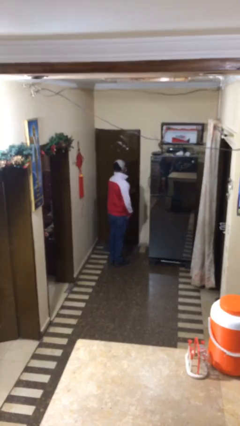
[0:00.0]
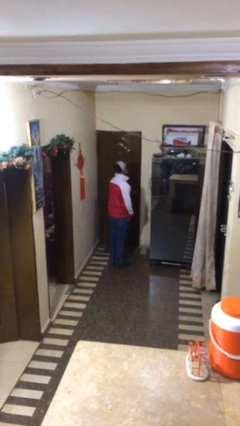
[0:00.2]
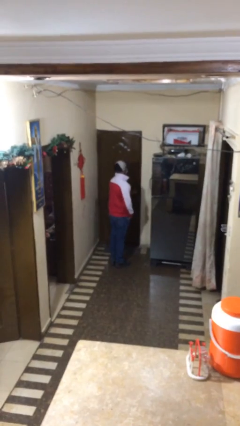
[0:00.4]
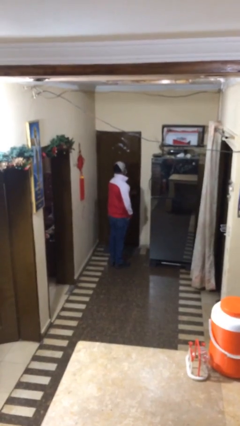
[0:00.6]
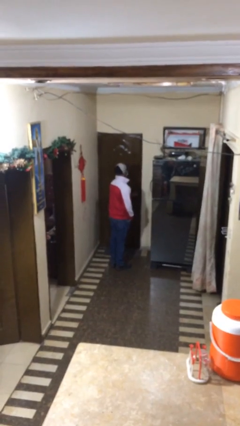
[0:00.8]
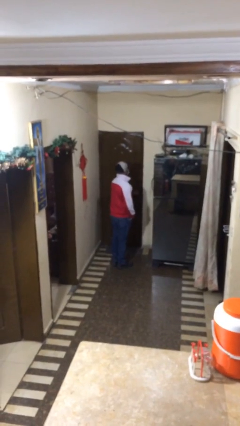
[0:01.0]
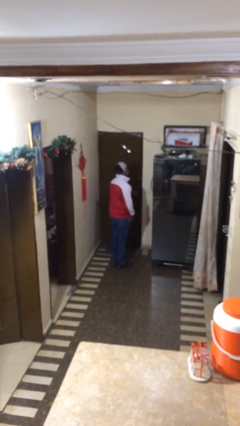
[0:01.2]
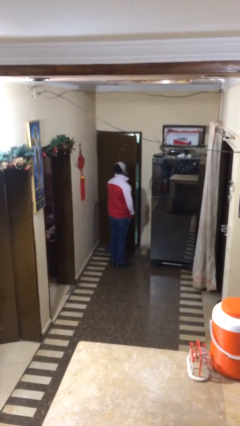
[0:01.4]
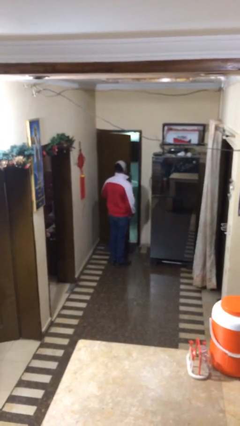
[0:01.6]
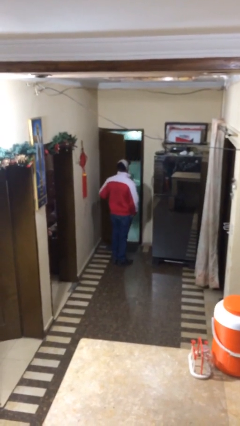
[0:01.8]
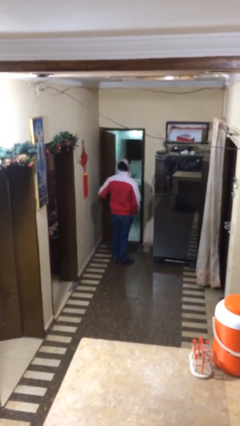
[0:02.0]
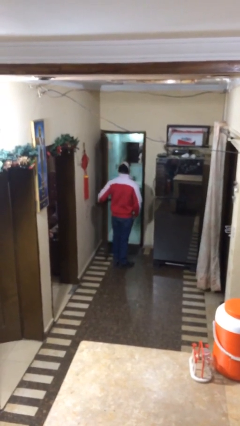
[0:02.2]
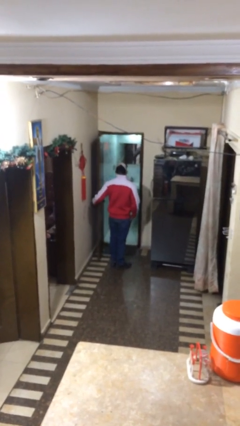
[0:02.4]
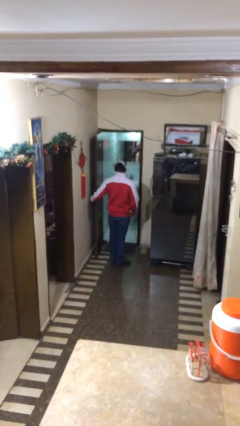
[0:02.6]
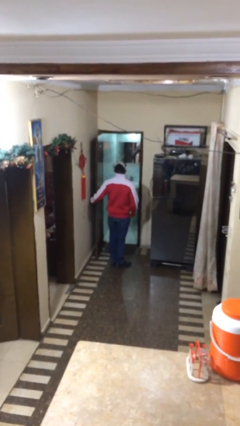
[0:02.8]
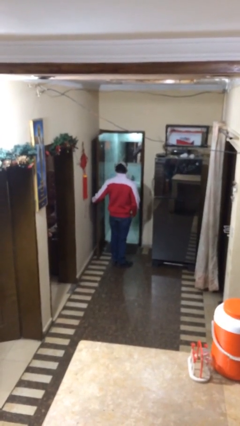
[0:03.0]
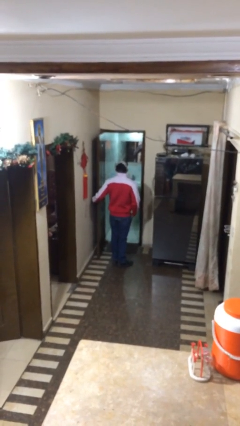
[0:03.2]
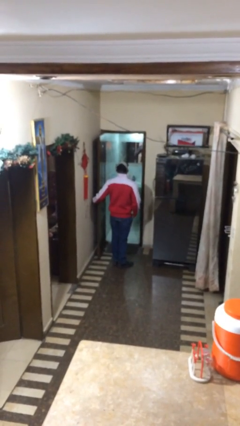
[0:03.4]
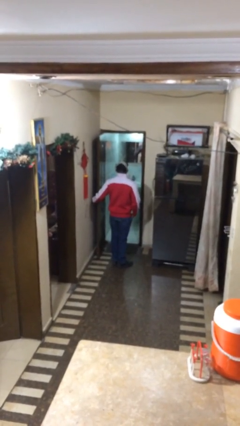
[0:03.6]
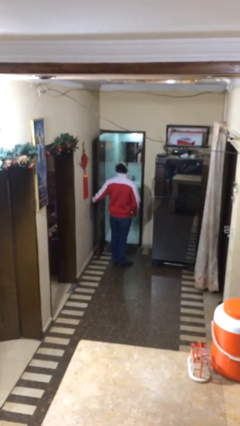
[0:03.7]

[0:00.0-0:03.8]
person opens facility door

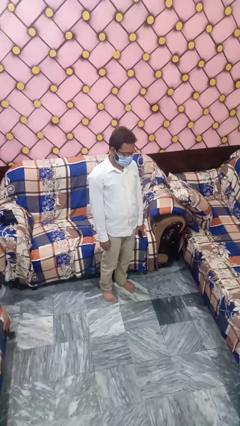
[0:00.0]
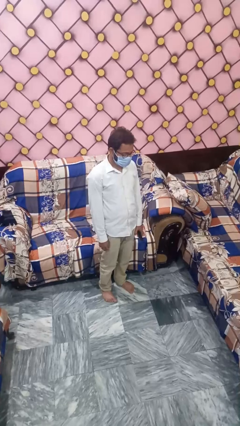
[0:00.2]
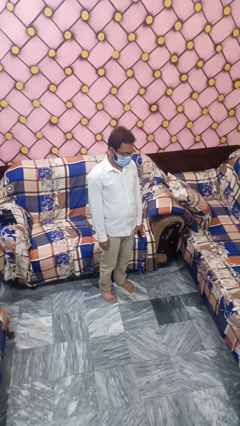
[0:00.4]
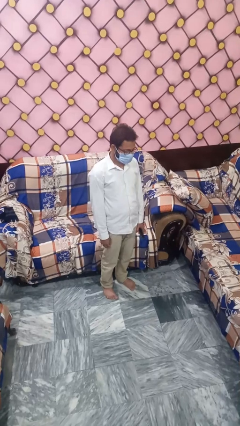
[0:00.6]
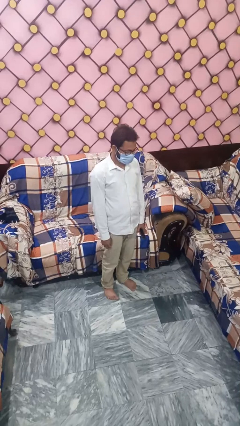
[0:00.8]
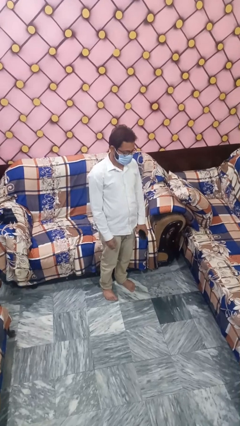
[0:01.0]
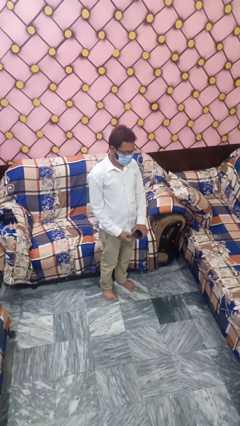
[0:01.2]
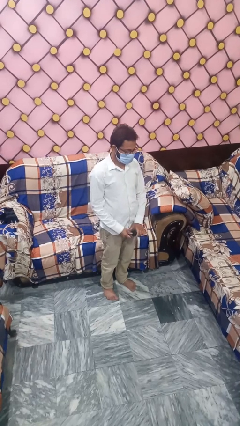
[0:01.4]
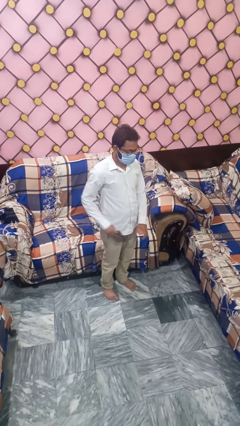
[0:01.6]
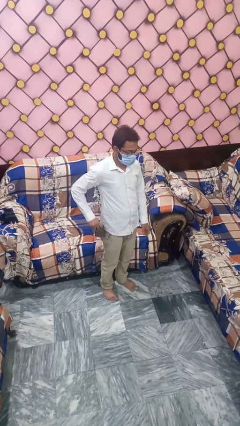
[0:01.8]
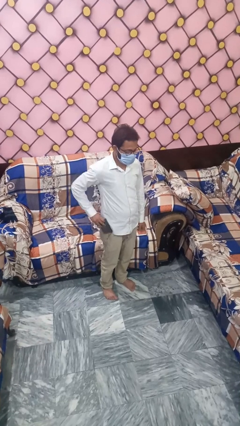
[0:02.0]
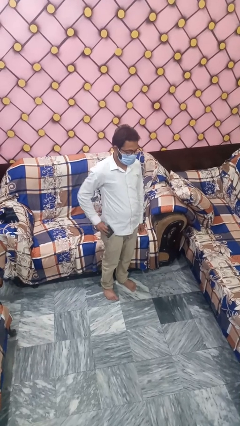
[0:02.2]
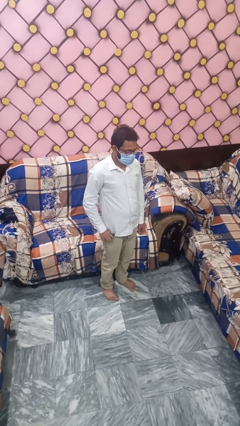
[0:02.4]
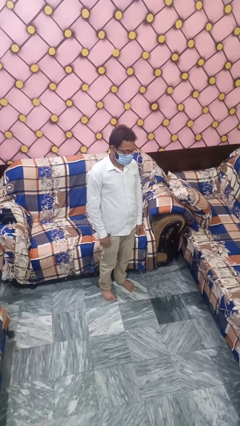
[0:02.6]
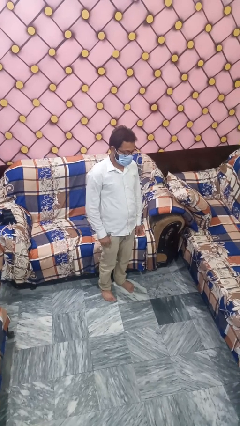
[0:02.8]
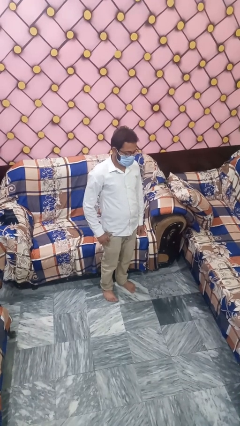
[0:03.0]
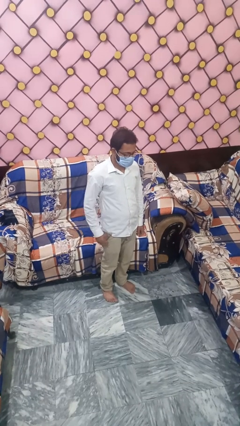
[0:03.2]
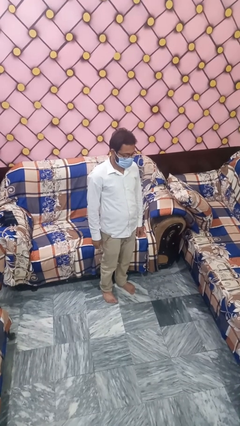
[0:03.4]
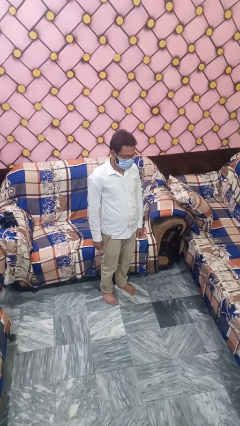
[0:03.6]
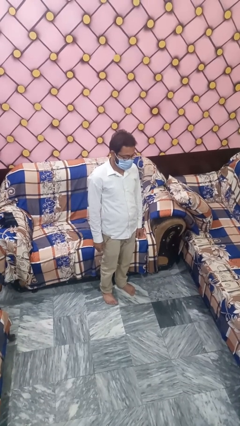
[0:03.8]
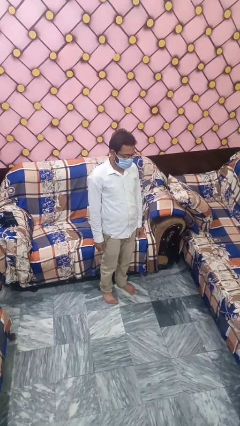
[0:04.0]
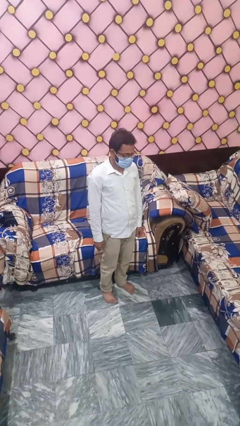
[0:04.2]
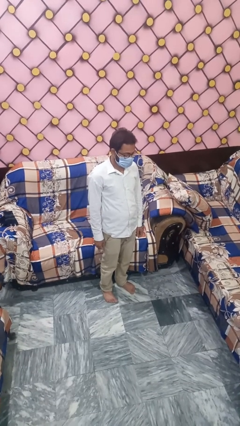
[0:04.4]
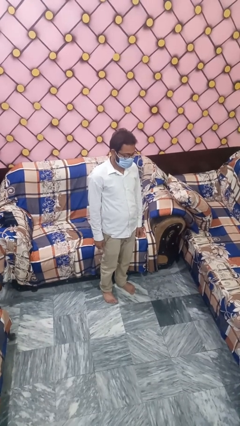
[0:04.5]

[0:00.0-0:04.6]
person takes phone from pocket

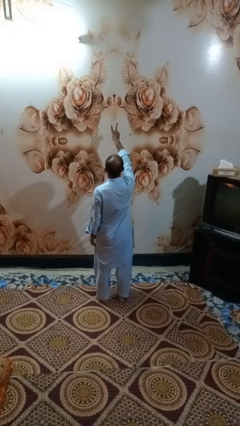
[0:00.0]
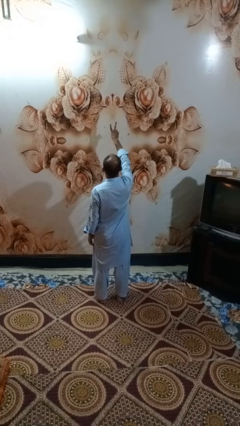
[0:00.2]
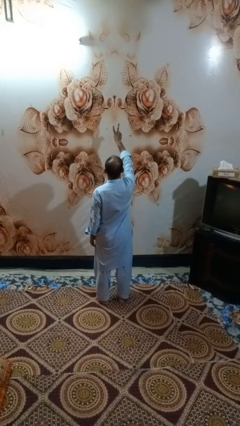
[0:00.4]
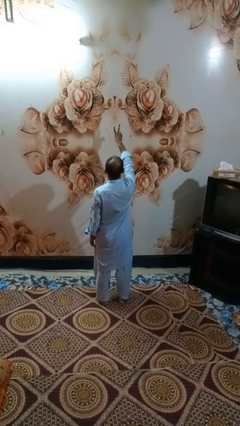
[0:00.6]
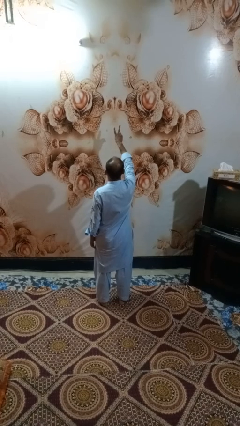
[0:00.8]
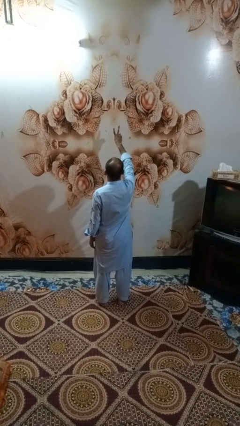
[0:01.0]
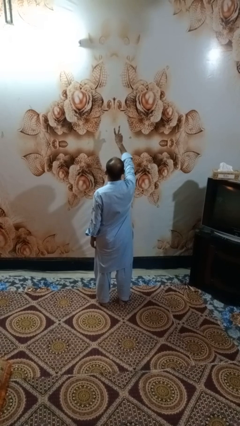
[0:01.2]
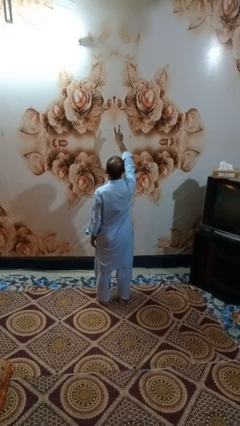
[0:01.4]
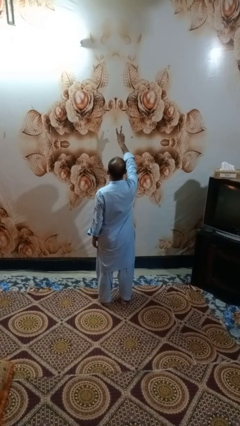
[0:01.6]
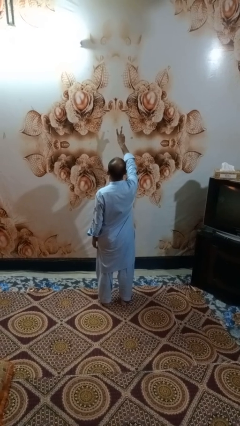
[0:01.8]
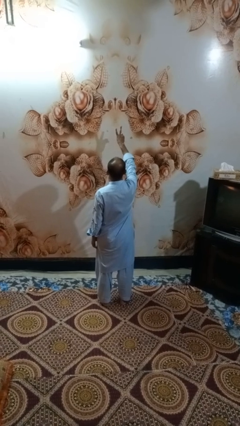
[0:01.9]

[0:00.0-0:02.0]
person gestures peace

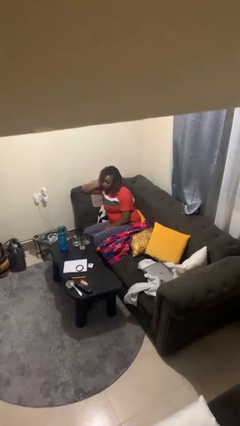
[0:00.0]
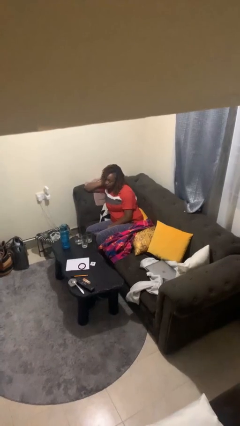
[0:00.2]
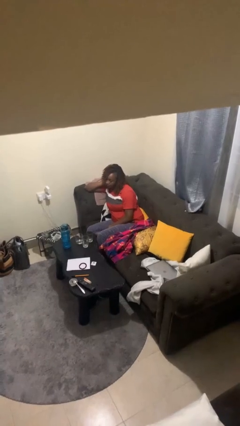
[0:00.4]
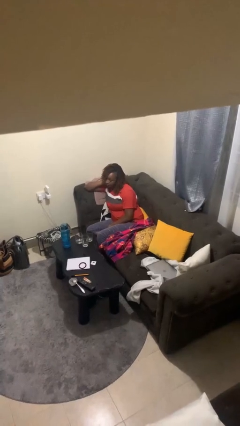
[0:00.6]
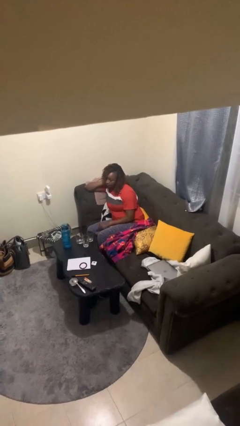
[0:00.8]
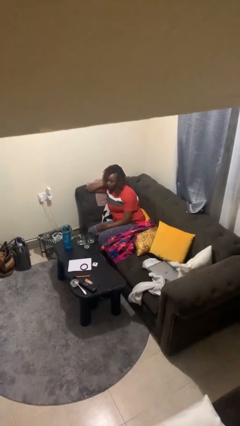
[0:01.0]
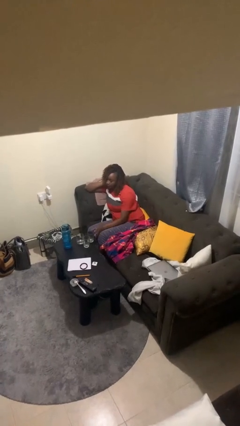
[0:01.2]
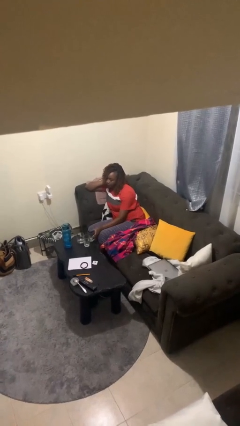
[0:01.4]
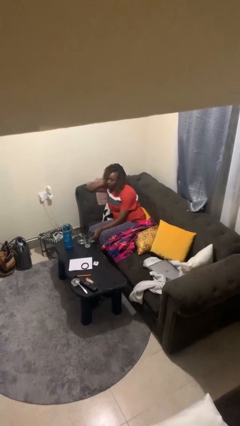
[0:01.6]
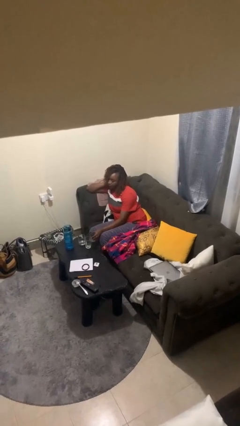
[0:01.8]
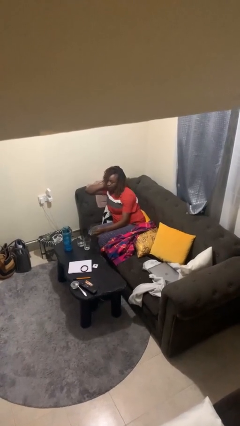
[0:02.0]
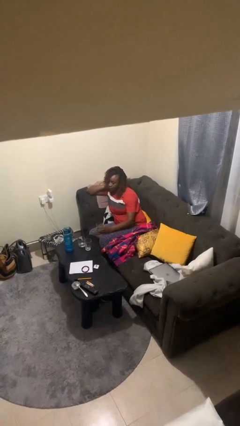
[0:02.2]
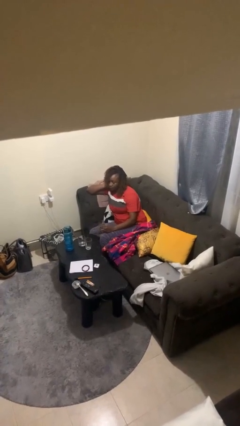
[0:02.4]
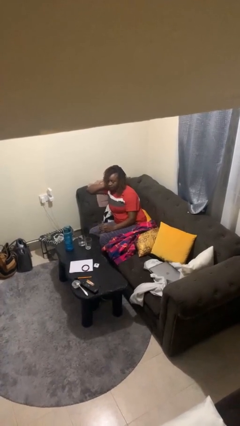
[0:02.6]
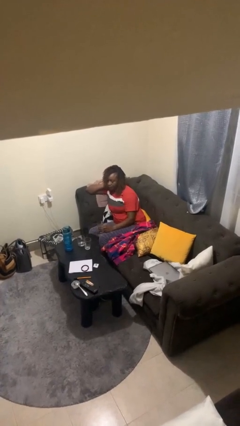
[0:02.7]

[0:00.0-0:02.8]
person picks up object from table

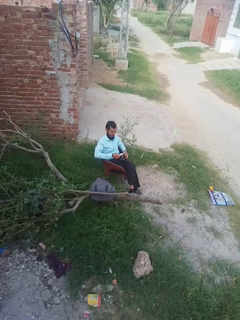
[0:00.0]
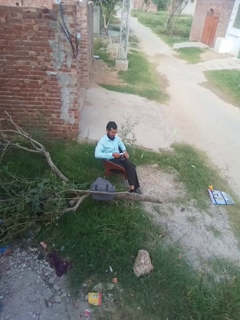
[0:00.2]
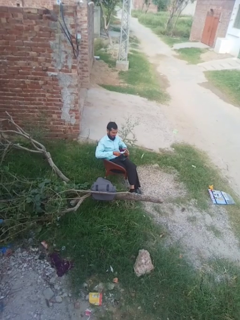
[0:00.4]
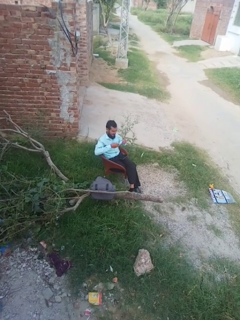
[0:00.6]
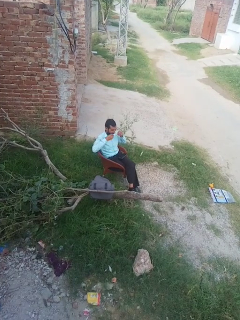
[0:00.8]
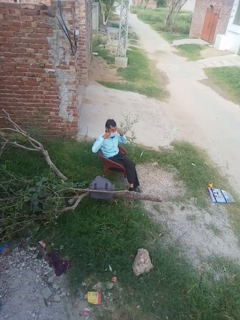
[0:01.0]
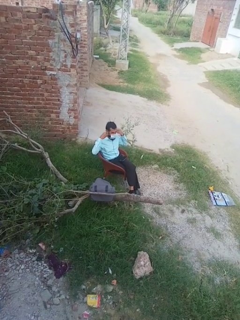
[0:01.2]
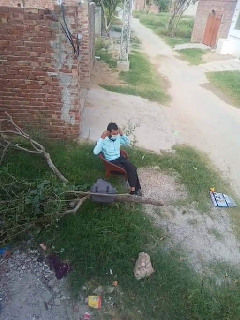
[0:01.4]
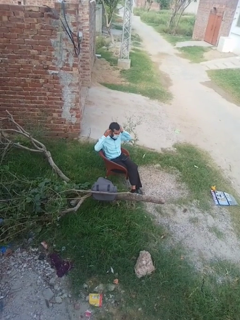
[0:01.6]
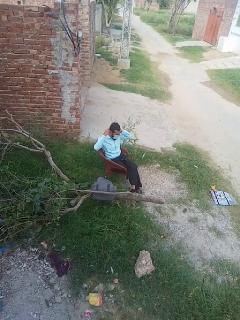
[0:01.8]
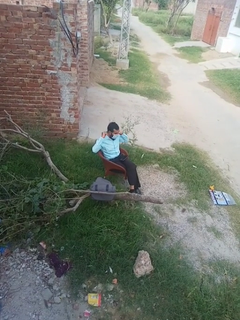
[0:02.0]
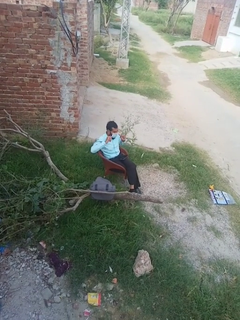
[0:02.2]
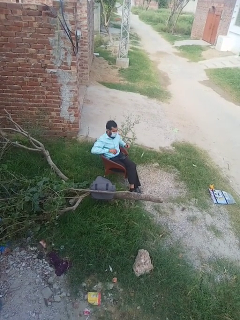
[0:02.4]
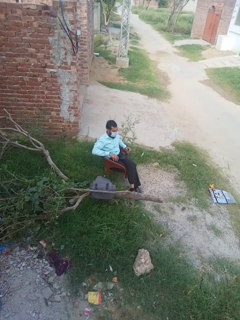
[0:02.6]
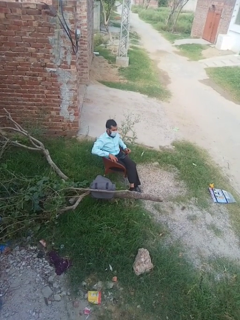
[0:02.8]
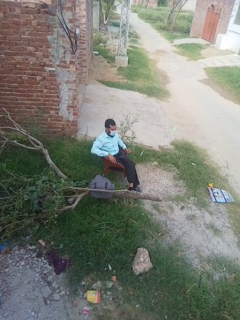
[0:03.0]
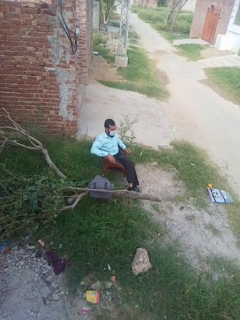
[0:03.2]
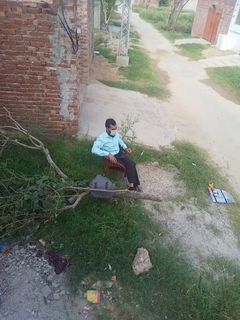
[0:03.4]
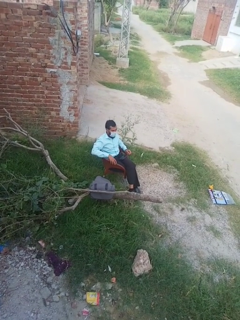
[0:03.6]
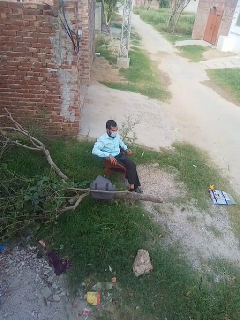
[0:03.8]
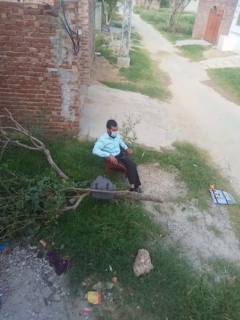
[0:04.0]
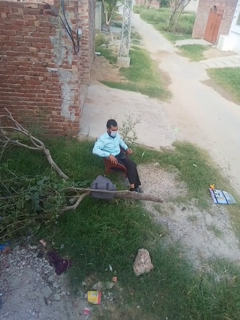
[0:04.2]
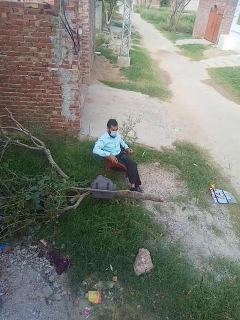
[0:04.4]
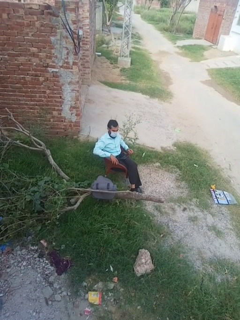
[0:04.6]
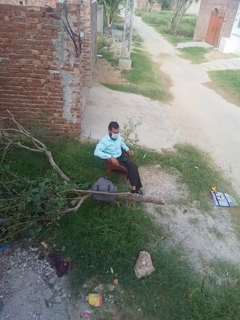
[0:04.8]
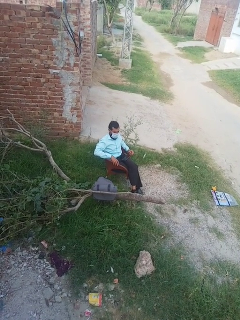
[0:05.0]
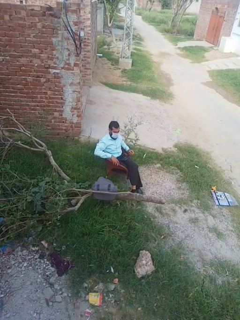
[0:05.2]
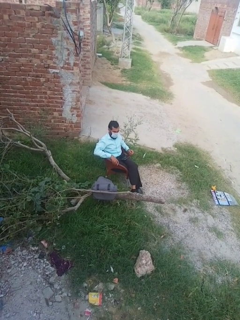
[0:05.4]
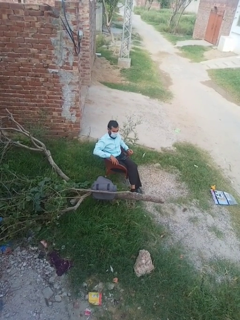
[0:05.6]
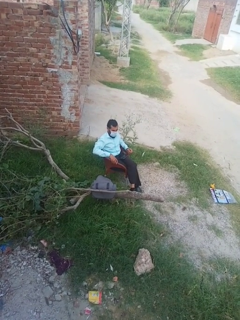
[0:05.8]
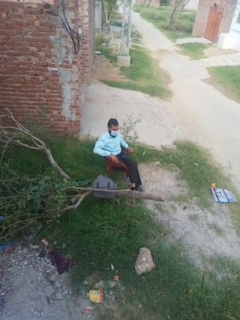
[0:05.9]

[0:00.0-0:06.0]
person puts on facemask
